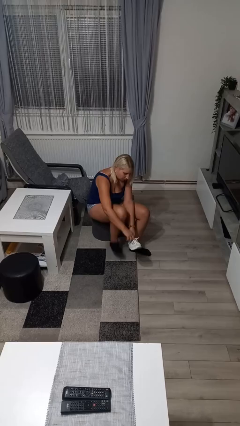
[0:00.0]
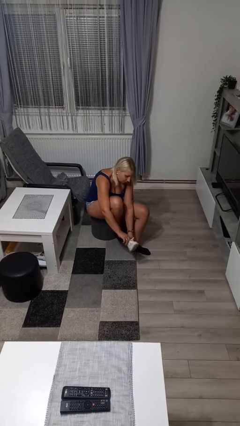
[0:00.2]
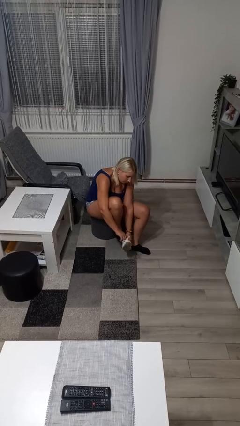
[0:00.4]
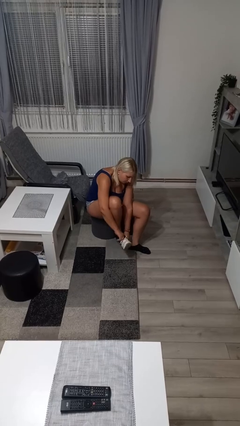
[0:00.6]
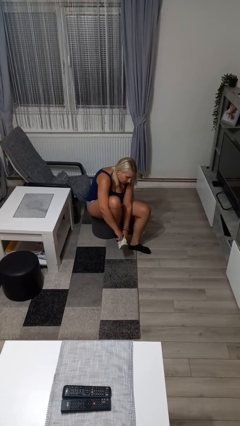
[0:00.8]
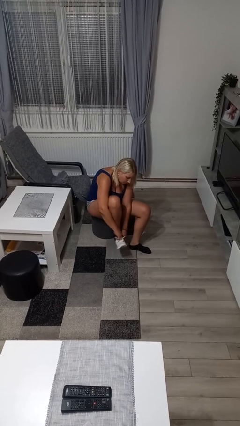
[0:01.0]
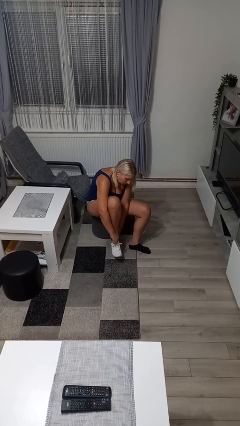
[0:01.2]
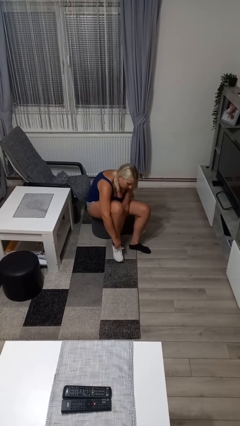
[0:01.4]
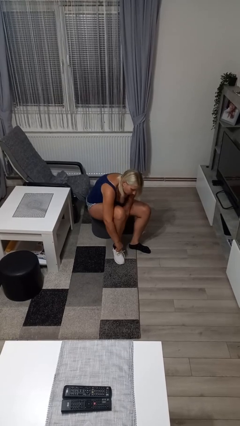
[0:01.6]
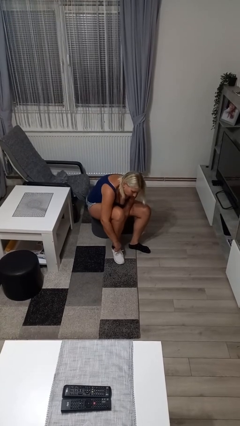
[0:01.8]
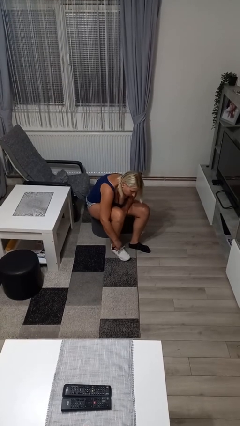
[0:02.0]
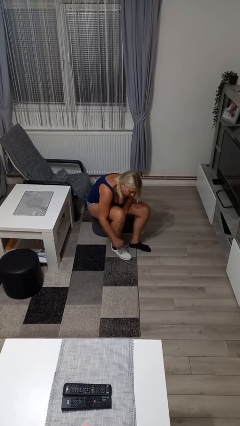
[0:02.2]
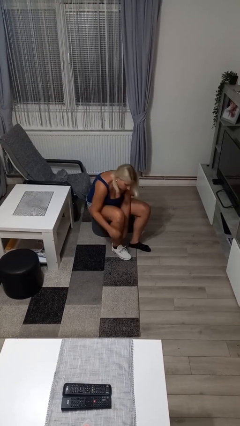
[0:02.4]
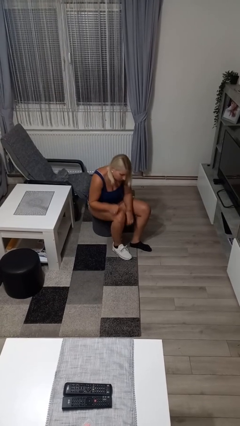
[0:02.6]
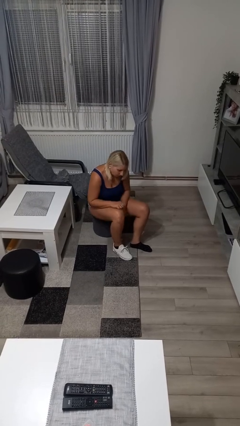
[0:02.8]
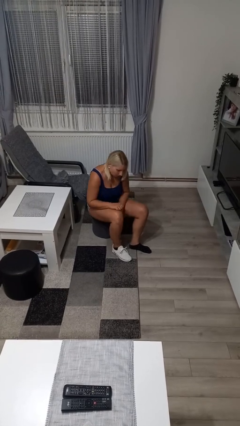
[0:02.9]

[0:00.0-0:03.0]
person puts on shoes

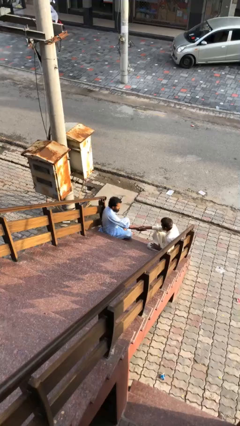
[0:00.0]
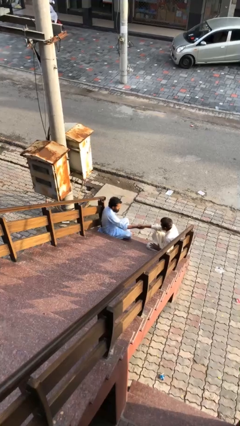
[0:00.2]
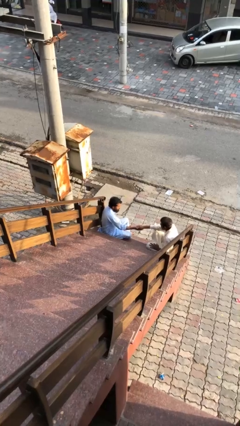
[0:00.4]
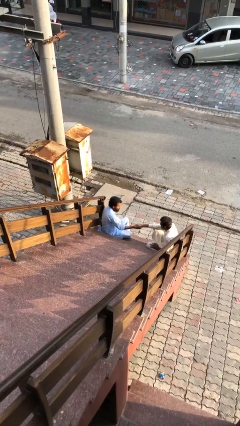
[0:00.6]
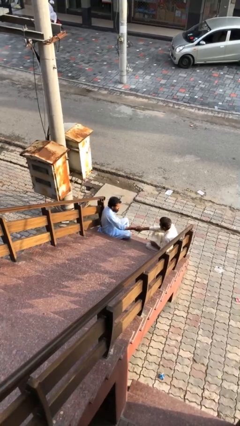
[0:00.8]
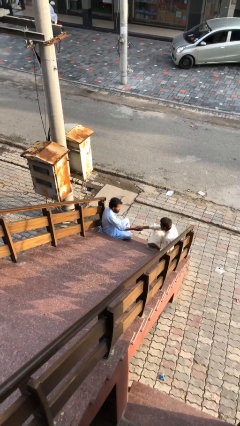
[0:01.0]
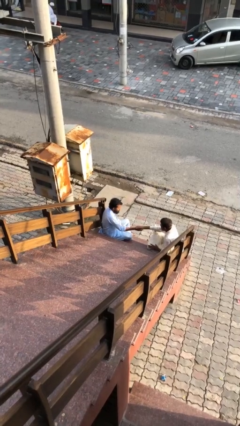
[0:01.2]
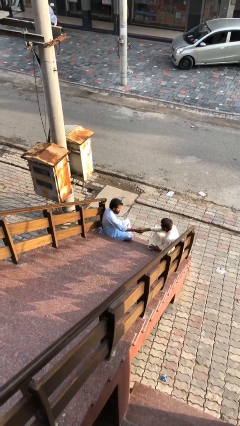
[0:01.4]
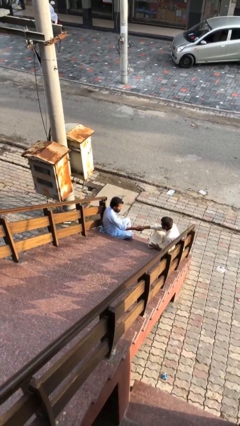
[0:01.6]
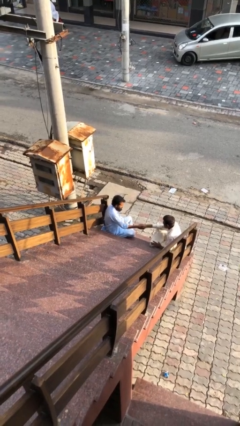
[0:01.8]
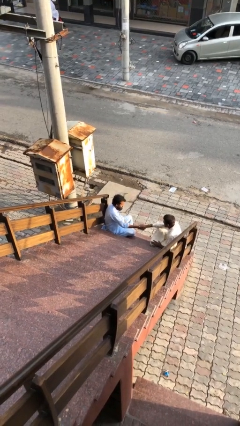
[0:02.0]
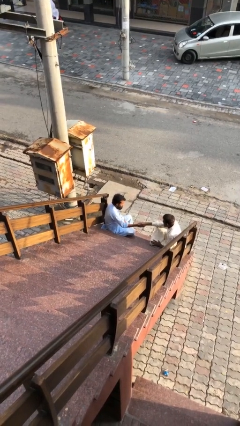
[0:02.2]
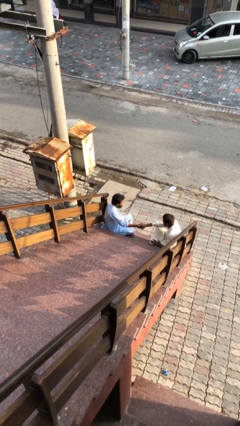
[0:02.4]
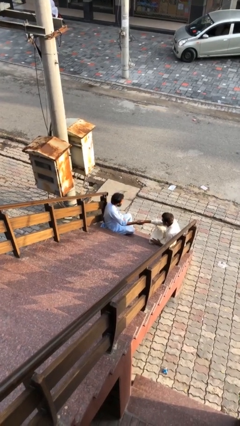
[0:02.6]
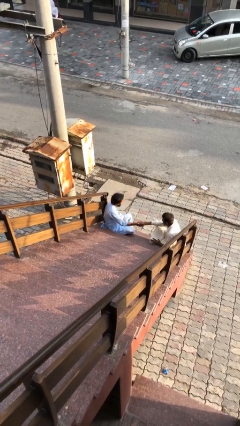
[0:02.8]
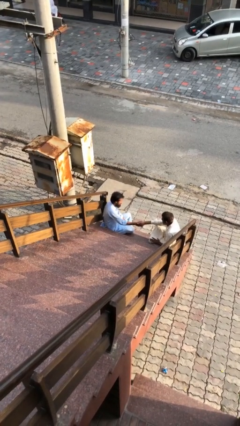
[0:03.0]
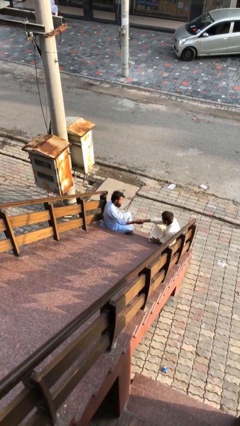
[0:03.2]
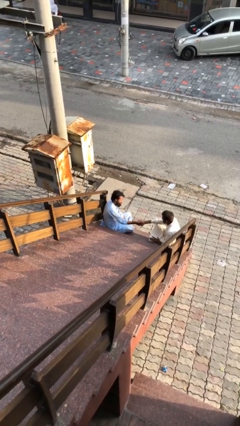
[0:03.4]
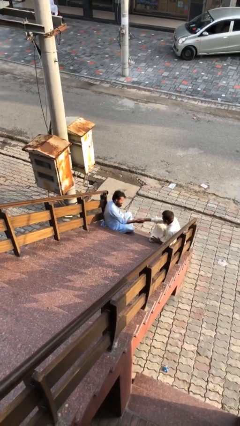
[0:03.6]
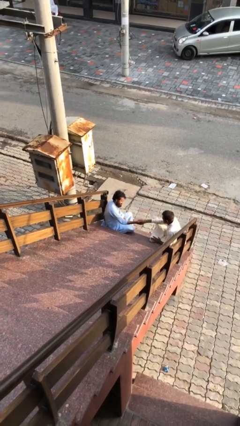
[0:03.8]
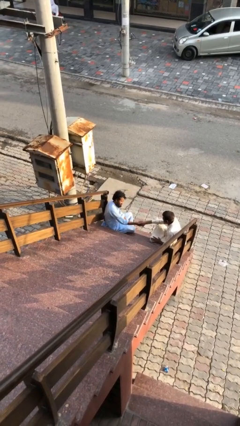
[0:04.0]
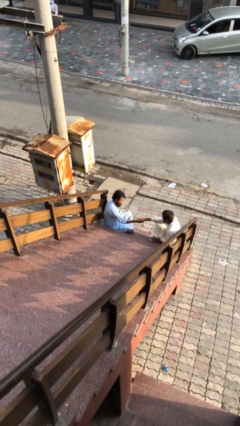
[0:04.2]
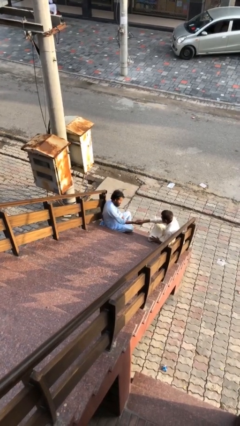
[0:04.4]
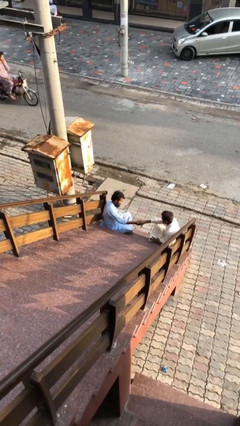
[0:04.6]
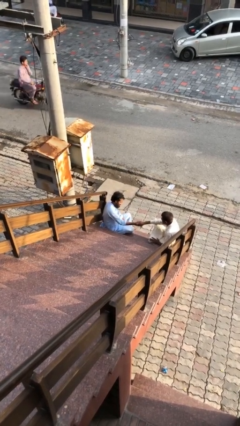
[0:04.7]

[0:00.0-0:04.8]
person shakes hand

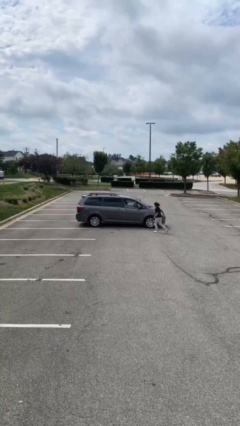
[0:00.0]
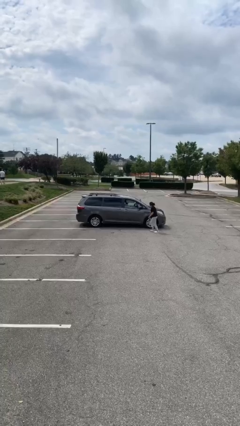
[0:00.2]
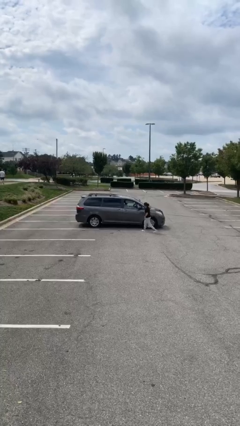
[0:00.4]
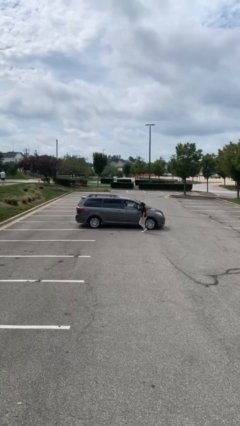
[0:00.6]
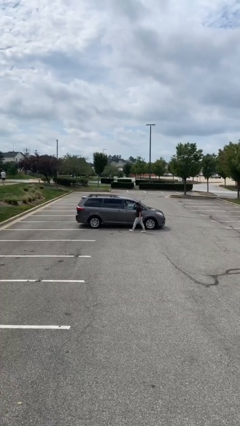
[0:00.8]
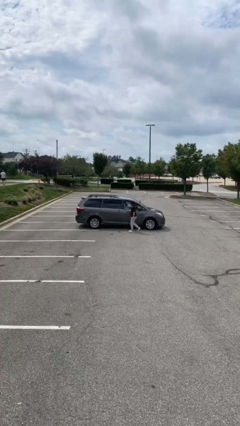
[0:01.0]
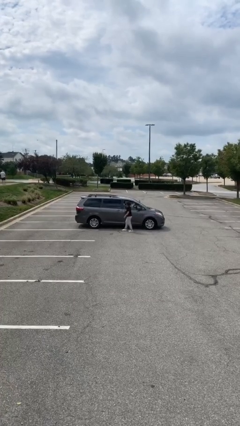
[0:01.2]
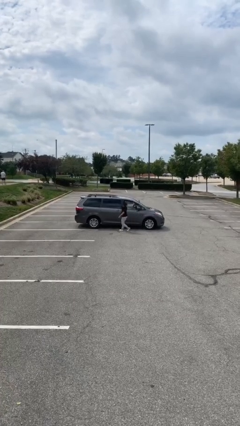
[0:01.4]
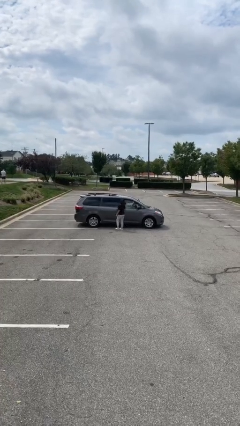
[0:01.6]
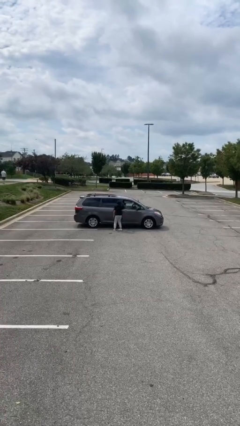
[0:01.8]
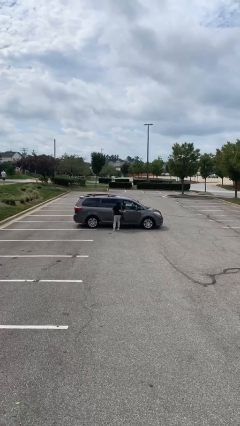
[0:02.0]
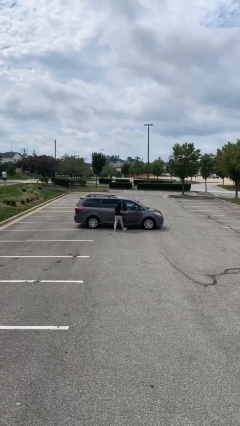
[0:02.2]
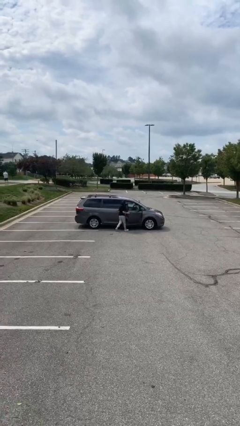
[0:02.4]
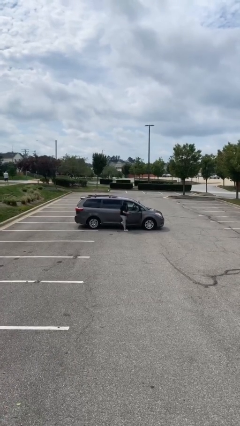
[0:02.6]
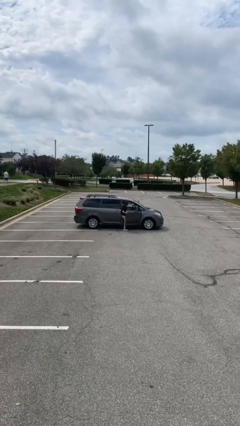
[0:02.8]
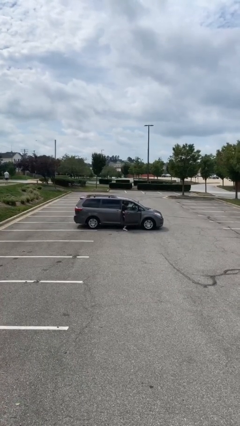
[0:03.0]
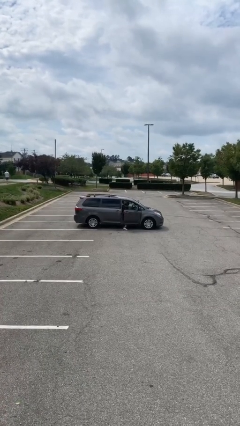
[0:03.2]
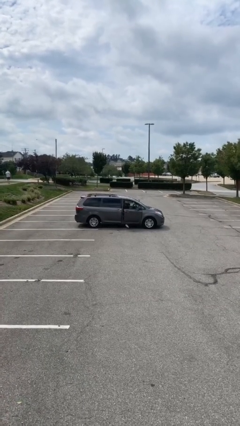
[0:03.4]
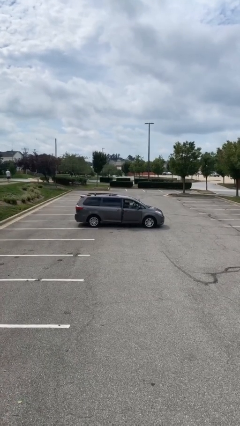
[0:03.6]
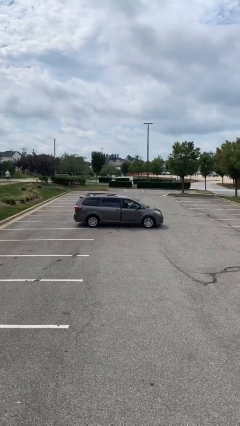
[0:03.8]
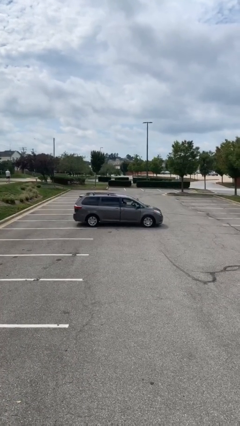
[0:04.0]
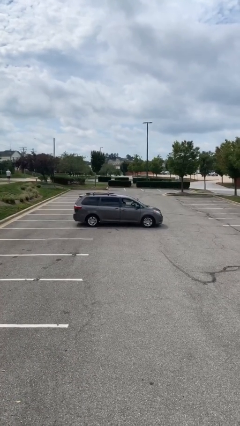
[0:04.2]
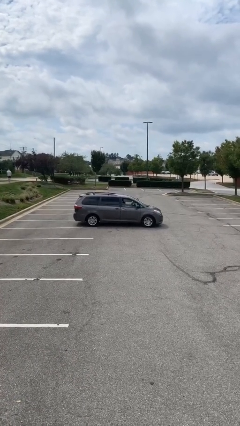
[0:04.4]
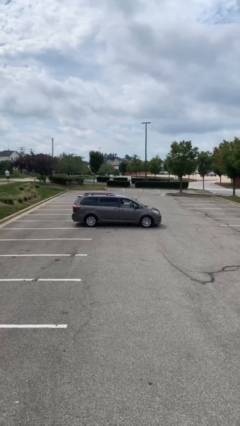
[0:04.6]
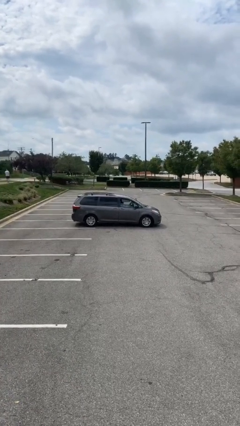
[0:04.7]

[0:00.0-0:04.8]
car picks up person

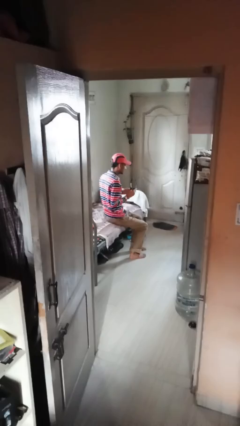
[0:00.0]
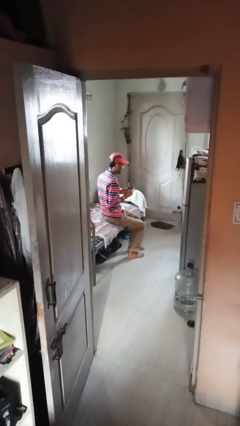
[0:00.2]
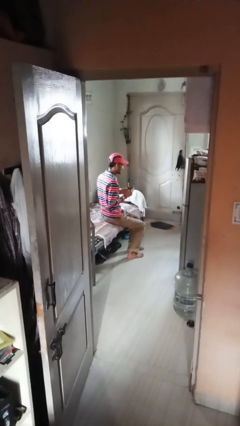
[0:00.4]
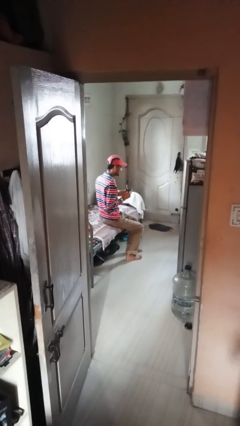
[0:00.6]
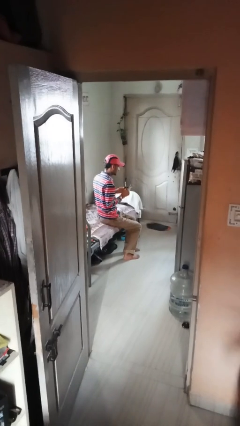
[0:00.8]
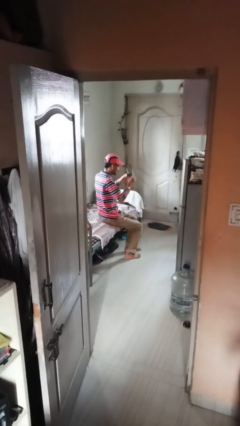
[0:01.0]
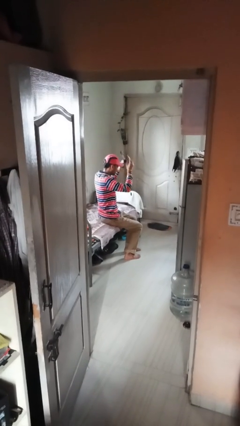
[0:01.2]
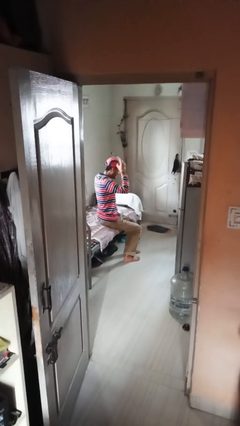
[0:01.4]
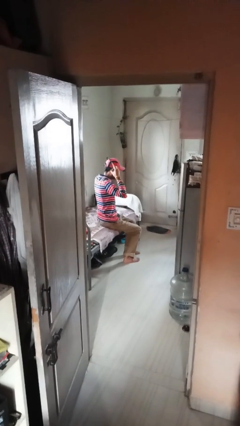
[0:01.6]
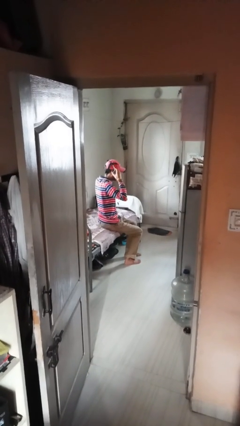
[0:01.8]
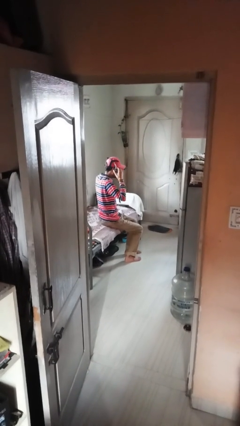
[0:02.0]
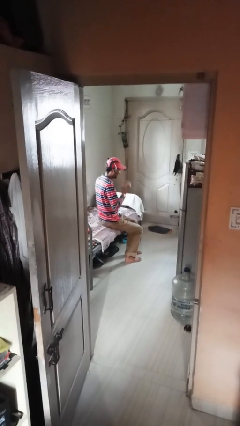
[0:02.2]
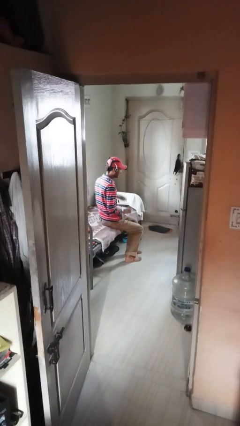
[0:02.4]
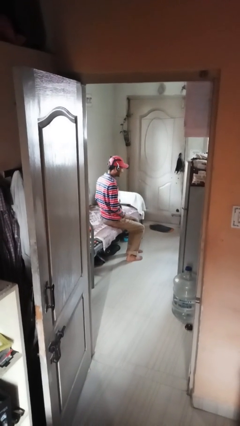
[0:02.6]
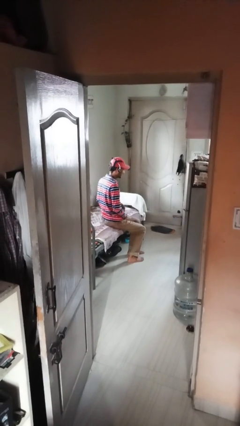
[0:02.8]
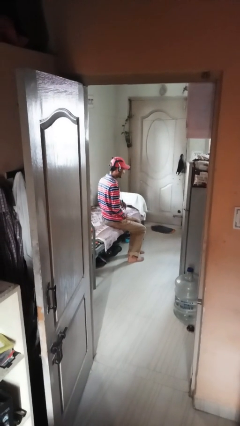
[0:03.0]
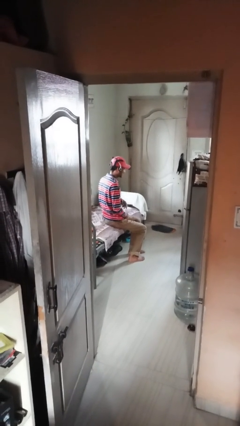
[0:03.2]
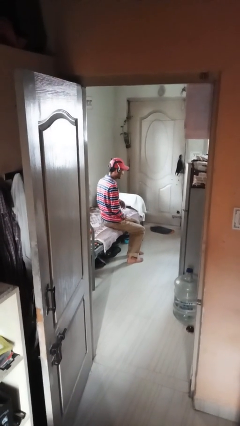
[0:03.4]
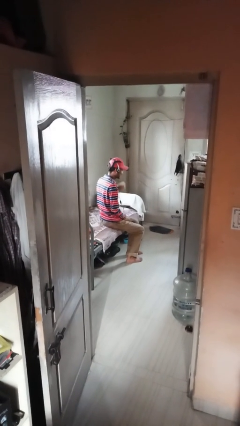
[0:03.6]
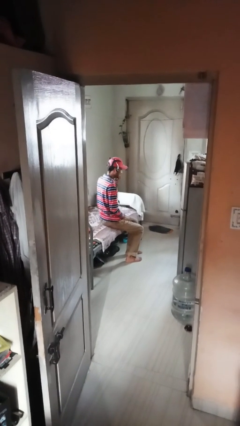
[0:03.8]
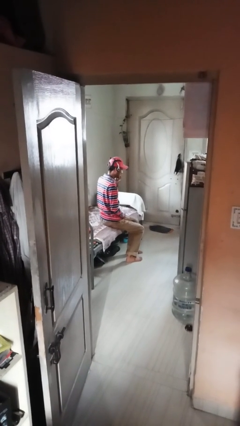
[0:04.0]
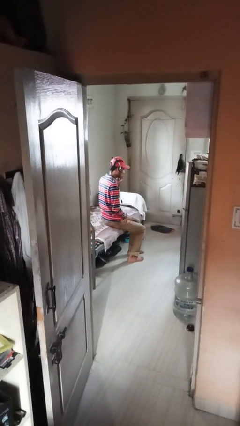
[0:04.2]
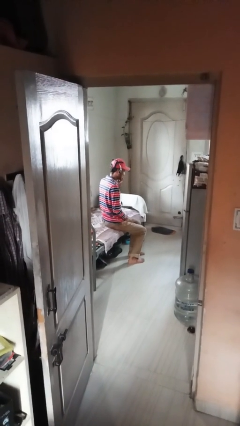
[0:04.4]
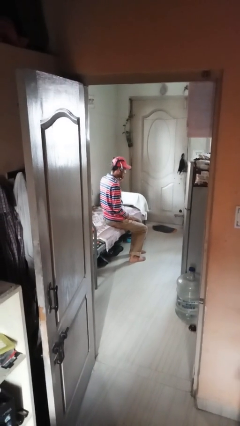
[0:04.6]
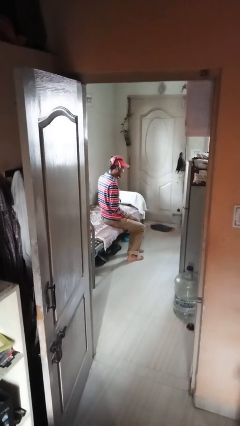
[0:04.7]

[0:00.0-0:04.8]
person puts on headphones

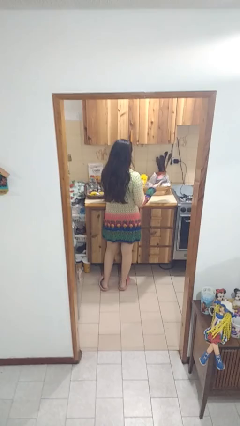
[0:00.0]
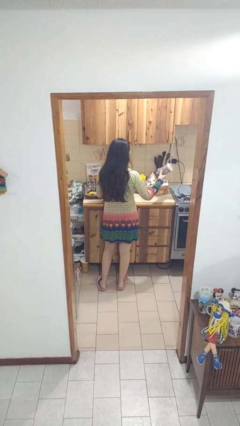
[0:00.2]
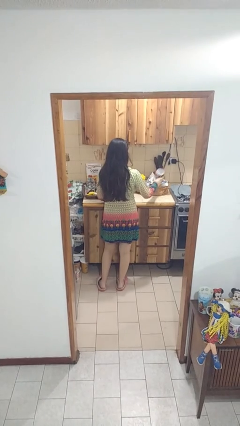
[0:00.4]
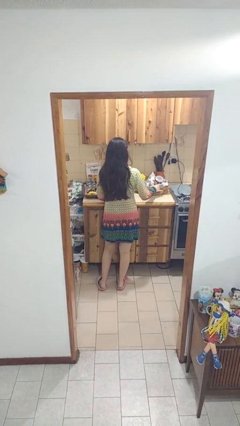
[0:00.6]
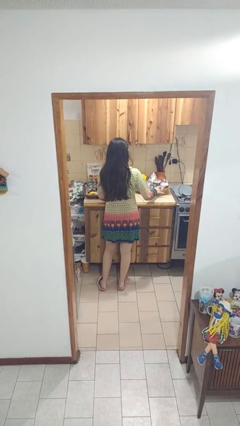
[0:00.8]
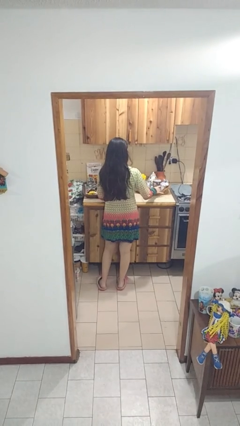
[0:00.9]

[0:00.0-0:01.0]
person puts object into bag
